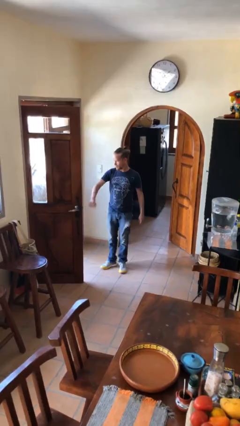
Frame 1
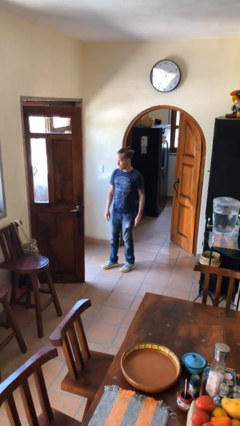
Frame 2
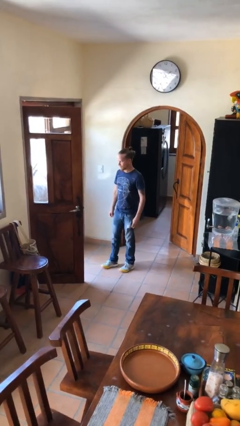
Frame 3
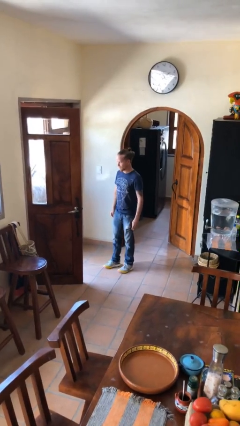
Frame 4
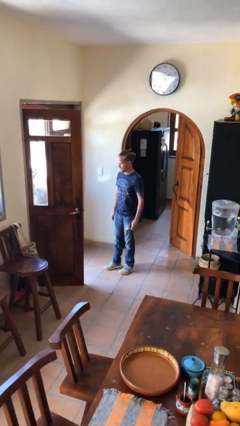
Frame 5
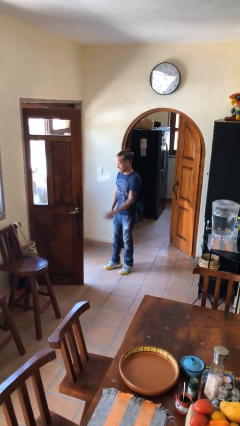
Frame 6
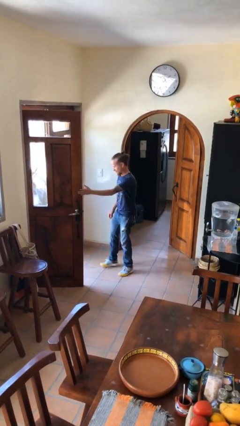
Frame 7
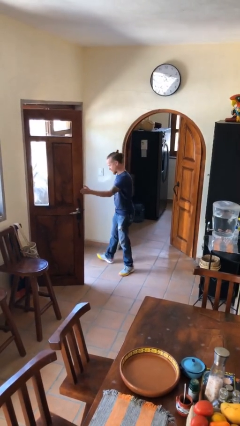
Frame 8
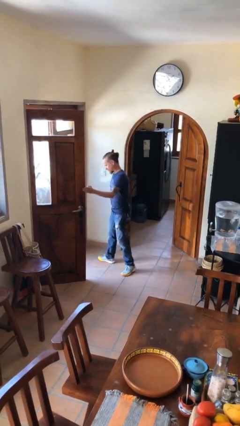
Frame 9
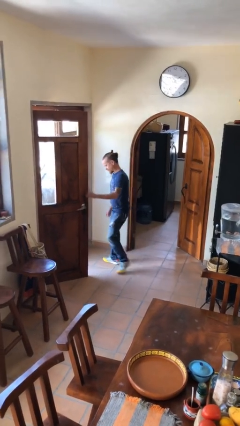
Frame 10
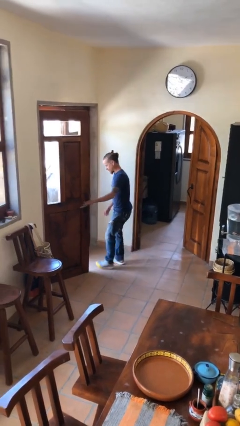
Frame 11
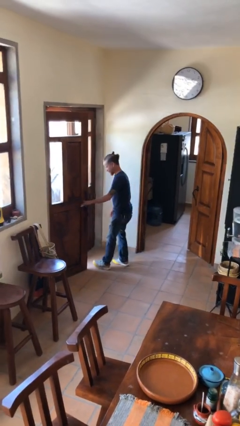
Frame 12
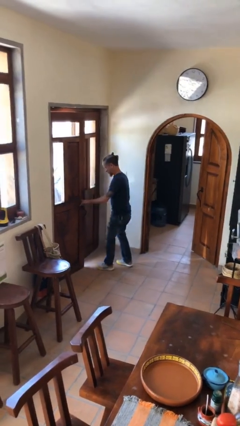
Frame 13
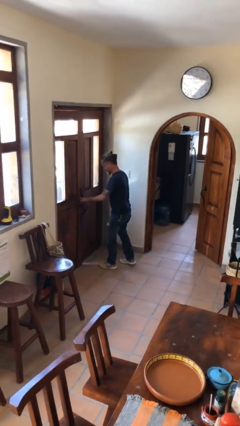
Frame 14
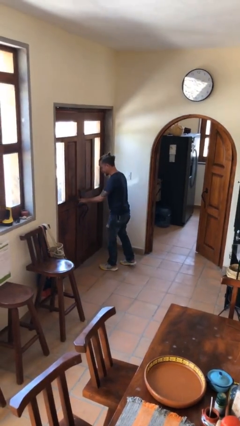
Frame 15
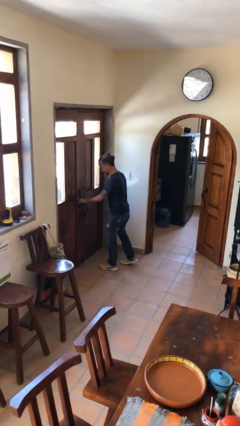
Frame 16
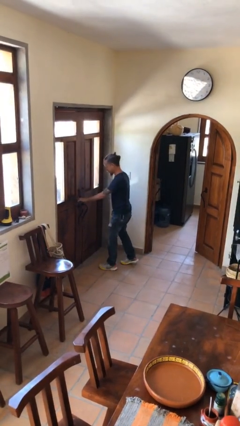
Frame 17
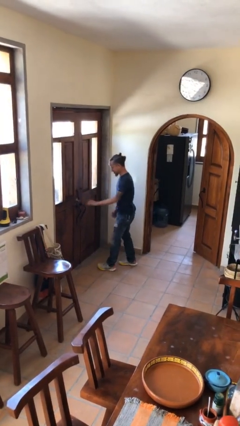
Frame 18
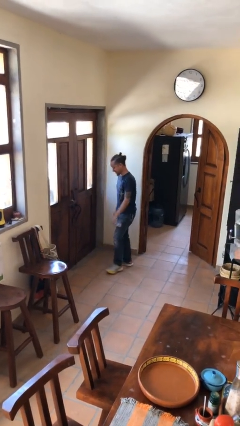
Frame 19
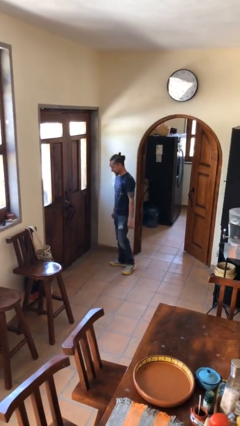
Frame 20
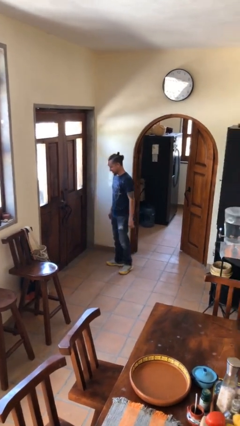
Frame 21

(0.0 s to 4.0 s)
person closes facility door

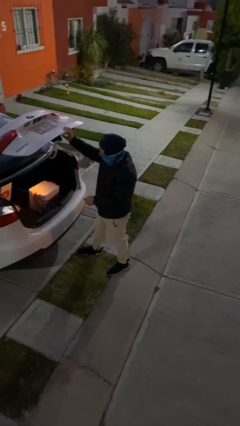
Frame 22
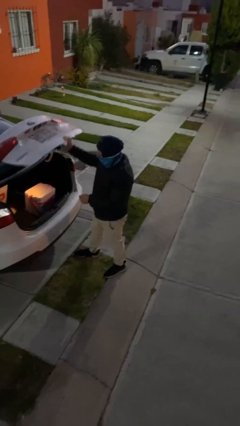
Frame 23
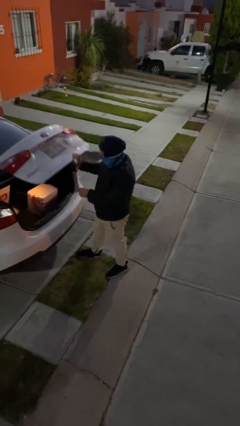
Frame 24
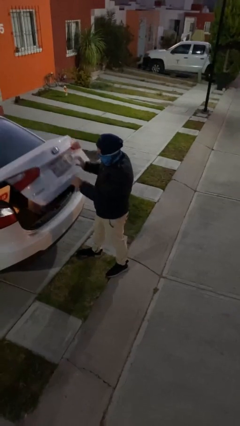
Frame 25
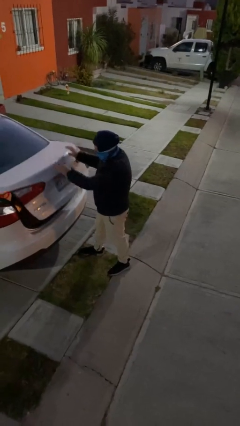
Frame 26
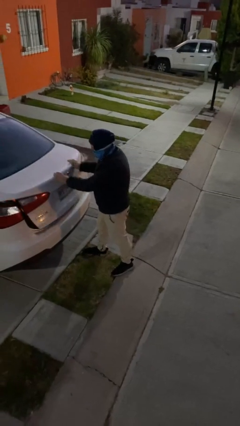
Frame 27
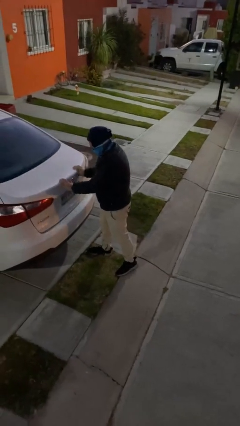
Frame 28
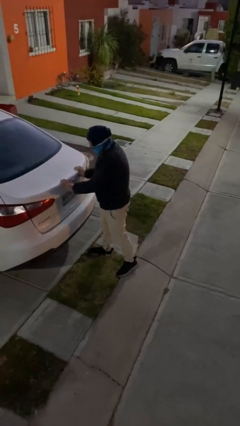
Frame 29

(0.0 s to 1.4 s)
person closes car trunk

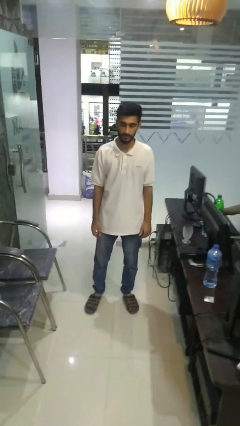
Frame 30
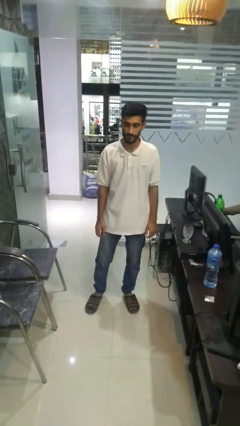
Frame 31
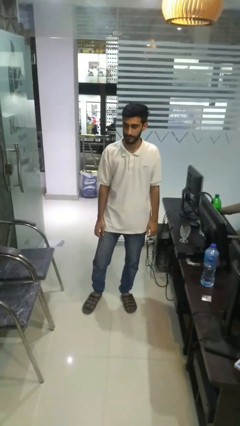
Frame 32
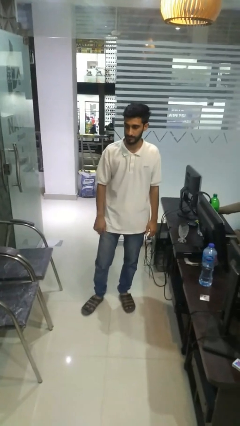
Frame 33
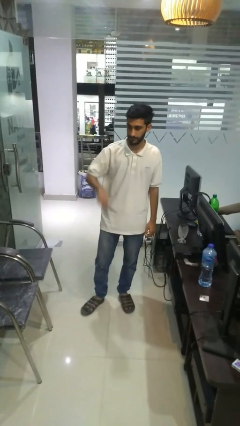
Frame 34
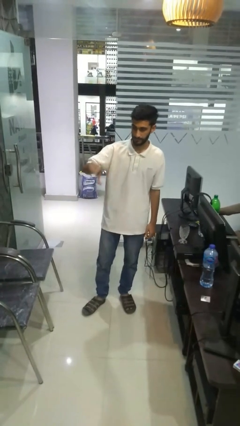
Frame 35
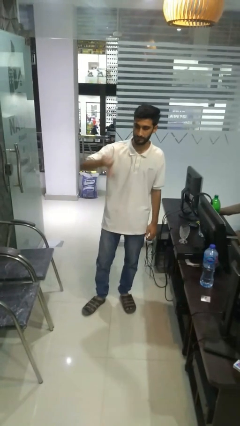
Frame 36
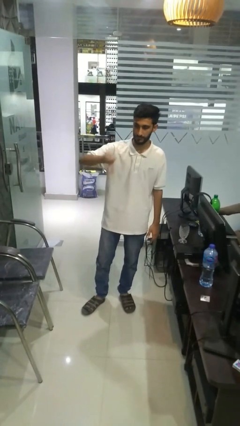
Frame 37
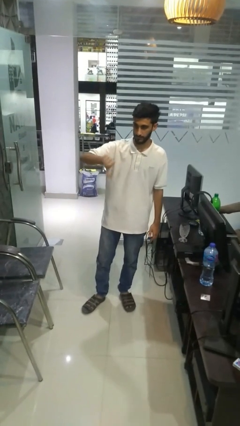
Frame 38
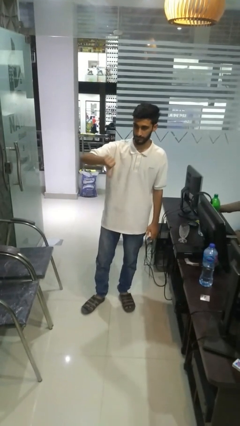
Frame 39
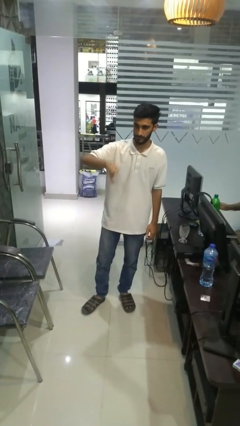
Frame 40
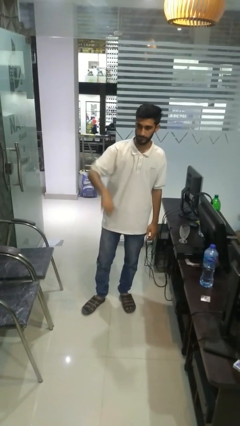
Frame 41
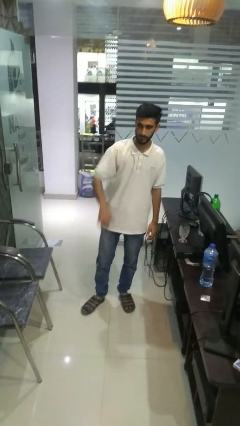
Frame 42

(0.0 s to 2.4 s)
person gestures thumbs down

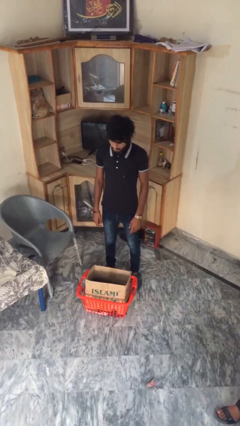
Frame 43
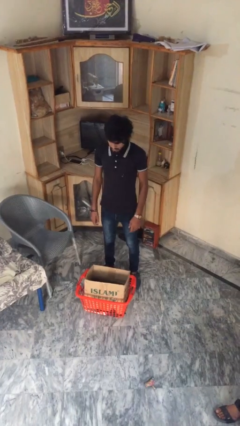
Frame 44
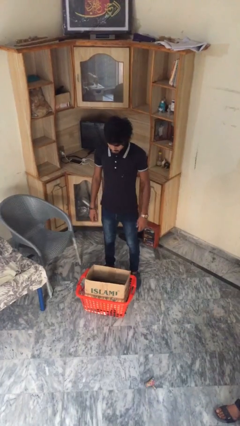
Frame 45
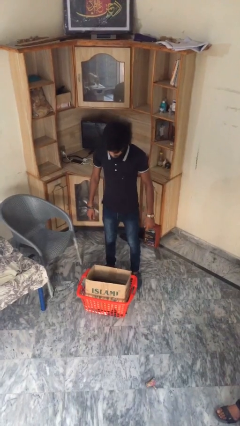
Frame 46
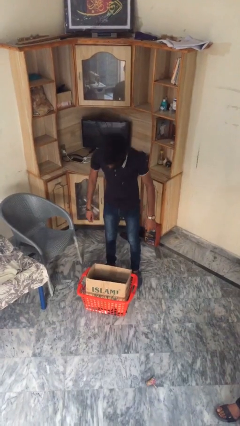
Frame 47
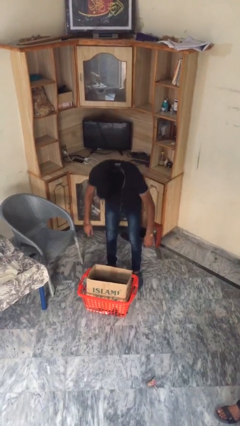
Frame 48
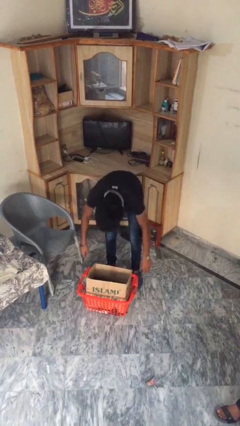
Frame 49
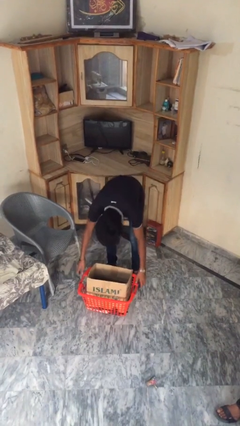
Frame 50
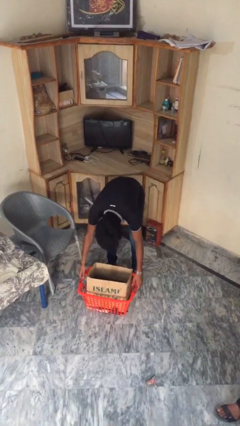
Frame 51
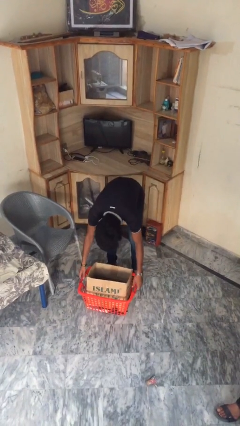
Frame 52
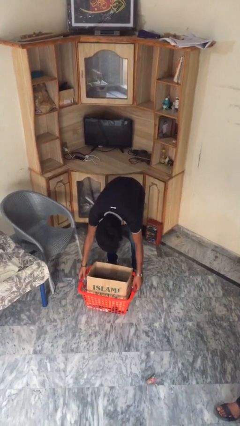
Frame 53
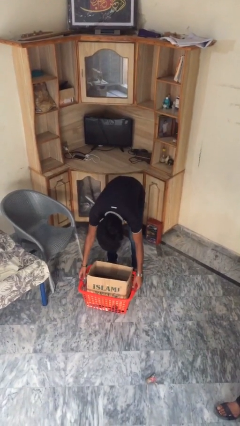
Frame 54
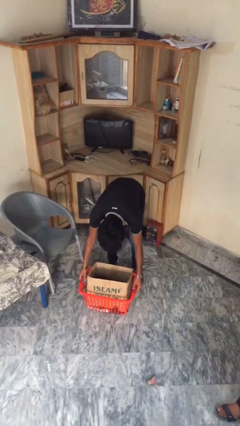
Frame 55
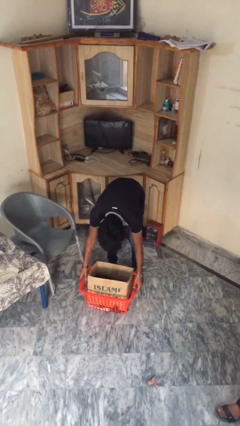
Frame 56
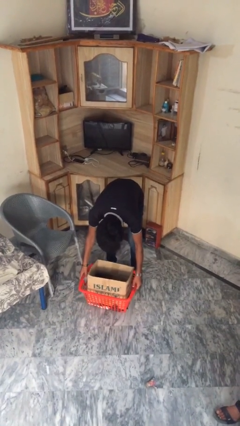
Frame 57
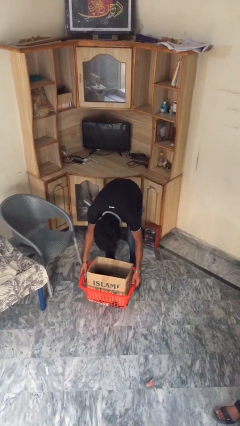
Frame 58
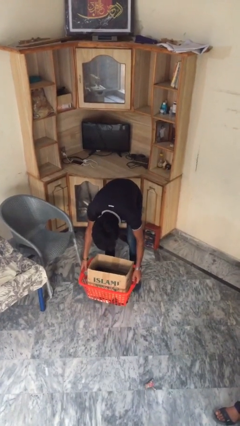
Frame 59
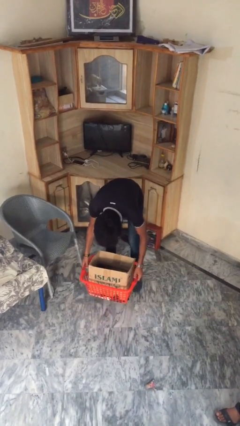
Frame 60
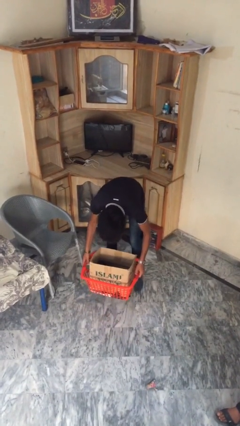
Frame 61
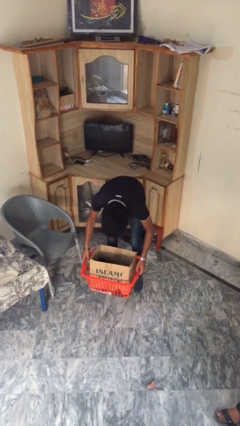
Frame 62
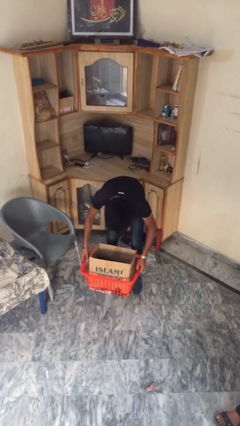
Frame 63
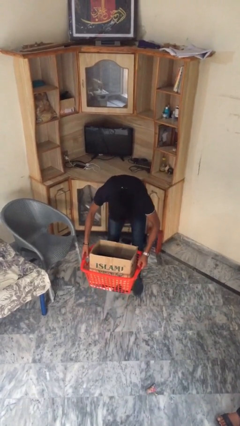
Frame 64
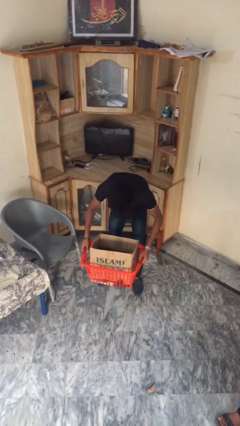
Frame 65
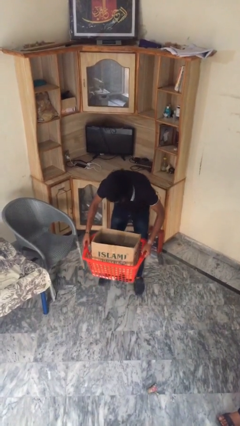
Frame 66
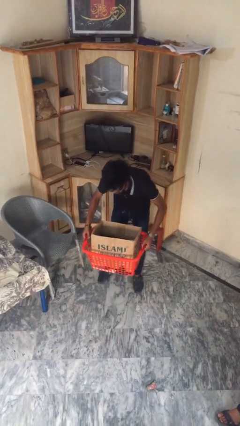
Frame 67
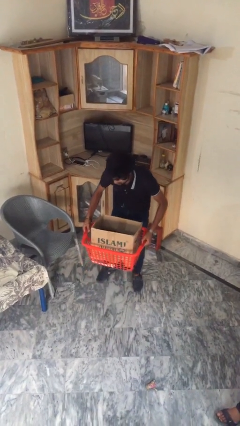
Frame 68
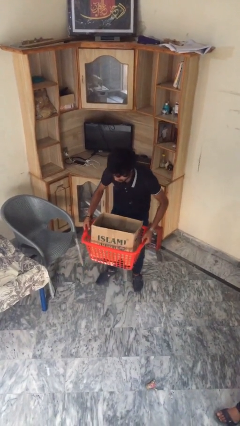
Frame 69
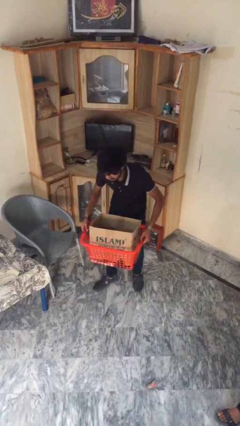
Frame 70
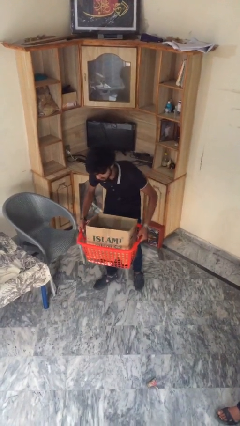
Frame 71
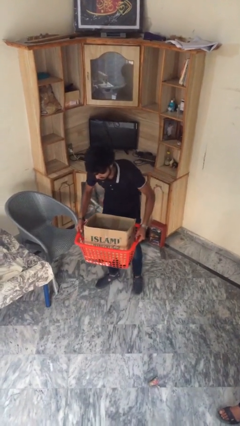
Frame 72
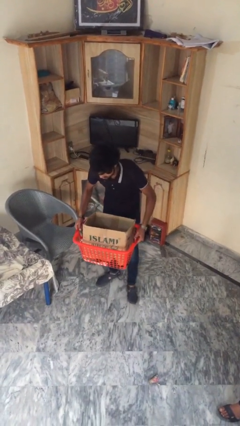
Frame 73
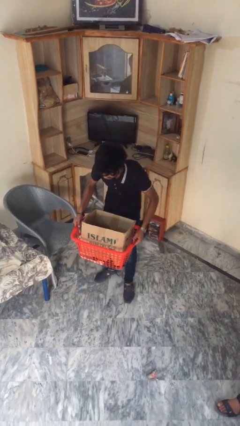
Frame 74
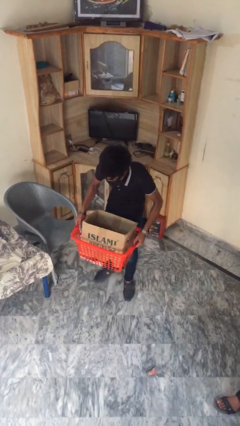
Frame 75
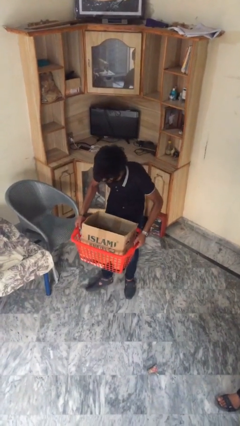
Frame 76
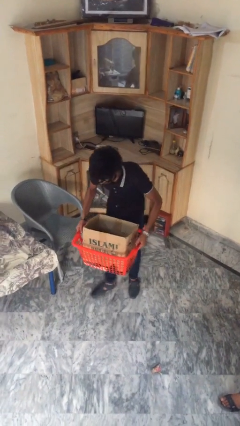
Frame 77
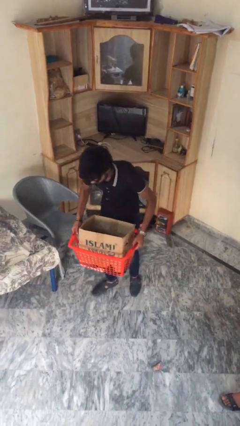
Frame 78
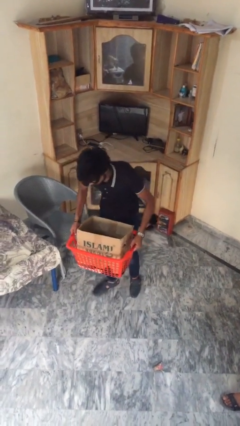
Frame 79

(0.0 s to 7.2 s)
person picks up object from floor

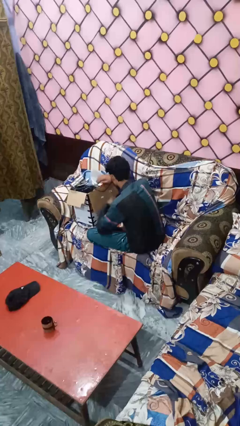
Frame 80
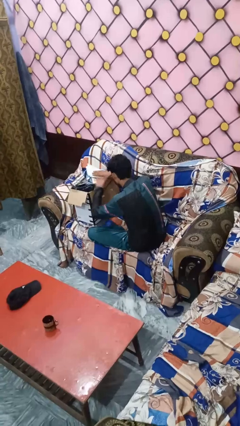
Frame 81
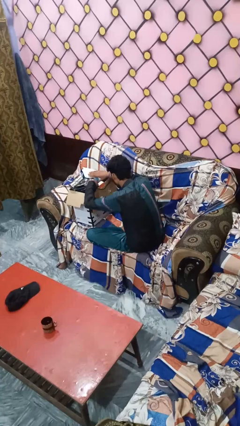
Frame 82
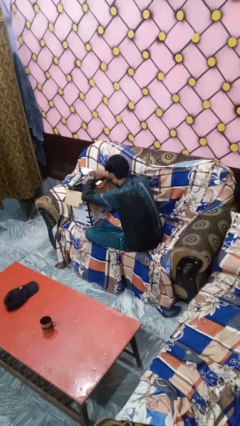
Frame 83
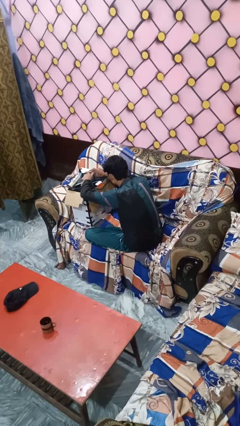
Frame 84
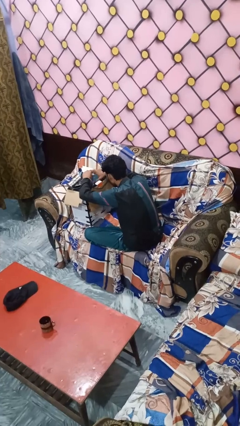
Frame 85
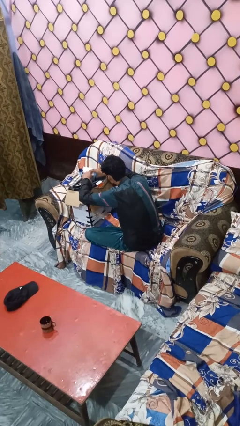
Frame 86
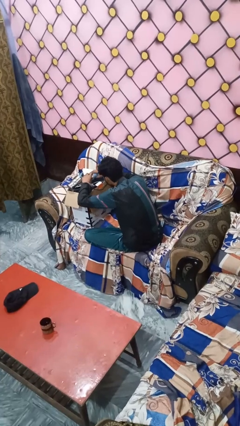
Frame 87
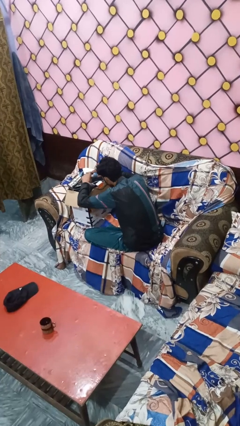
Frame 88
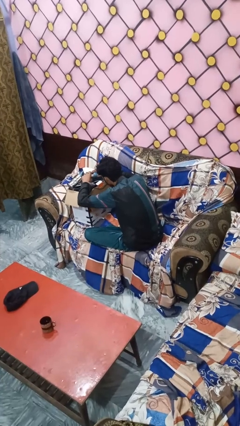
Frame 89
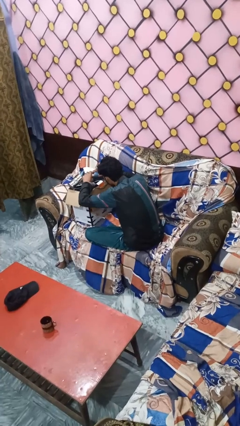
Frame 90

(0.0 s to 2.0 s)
person searches in box

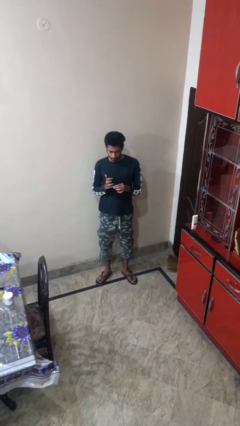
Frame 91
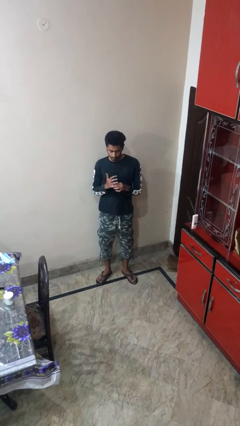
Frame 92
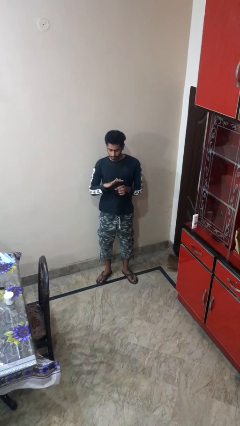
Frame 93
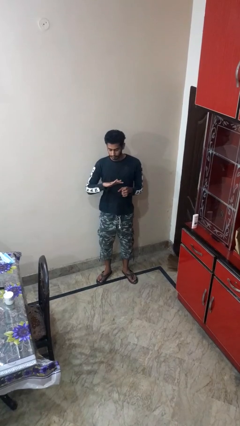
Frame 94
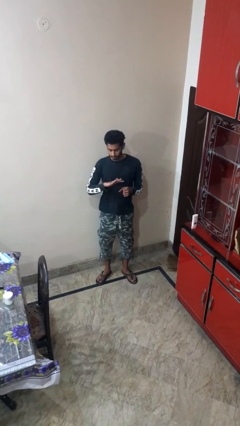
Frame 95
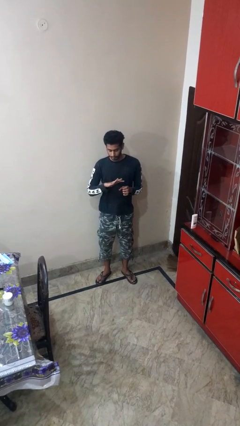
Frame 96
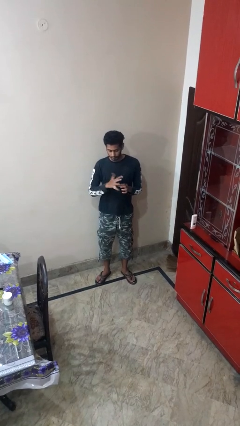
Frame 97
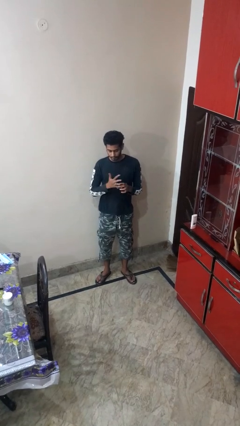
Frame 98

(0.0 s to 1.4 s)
person puts on ring
